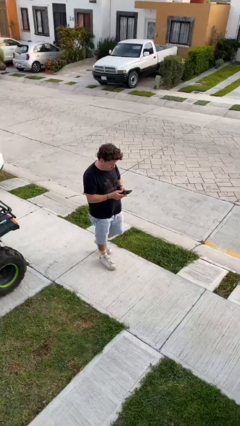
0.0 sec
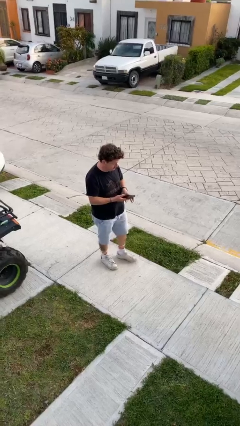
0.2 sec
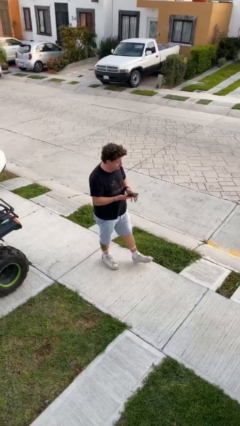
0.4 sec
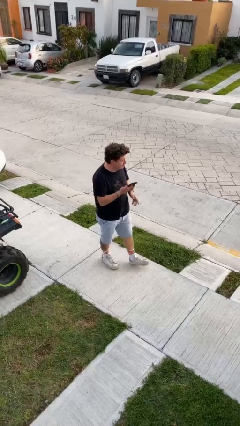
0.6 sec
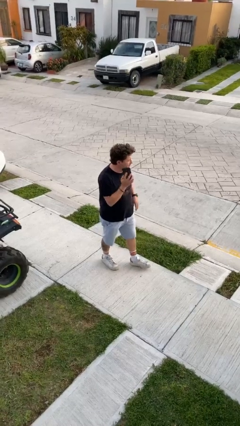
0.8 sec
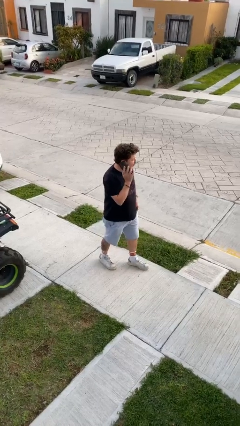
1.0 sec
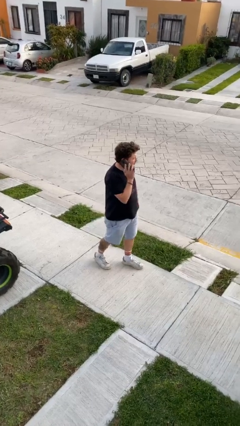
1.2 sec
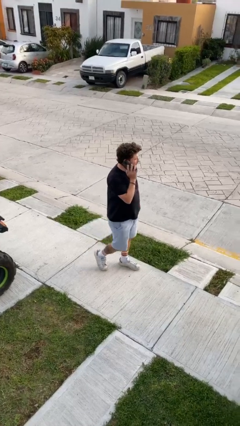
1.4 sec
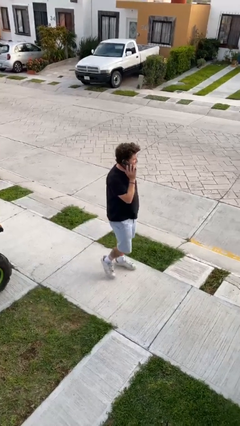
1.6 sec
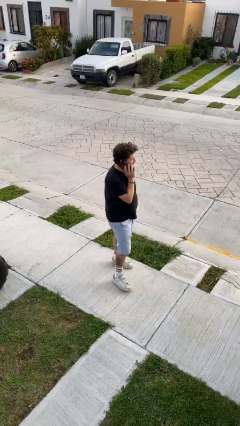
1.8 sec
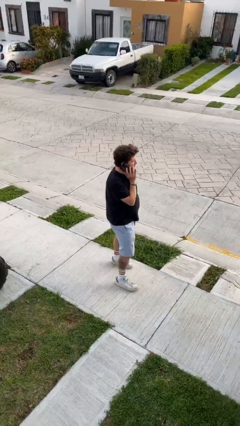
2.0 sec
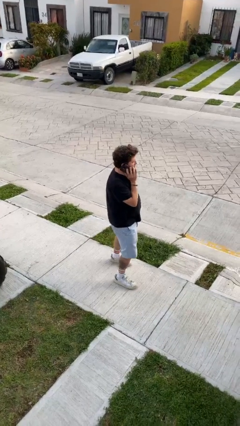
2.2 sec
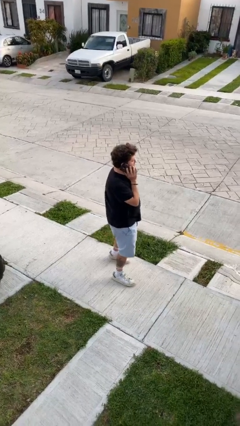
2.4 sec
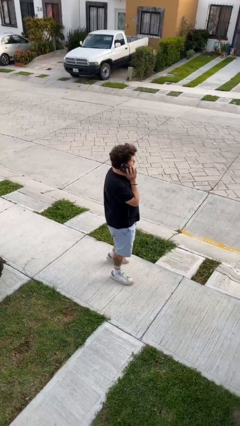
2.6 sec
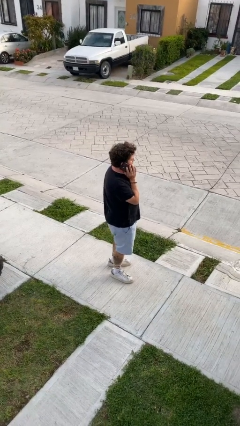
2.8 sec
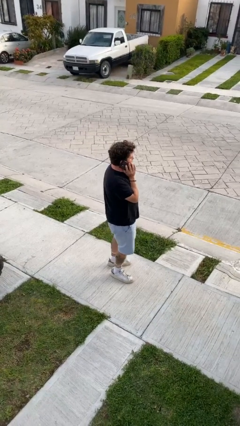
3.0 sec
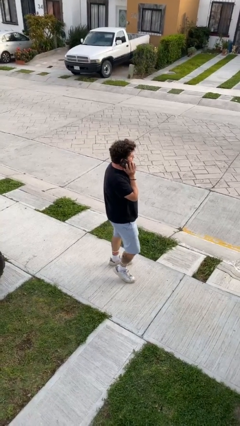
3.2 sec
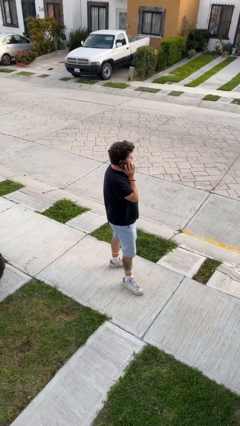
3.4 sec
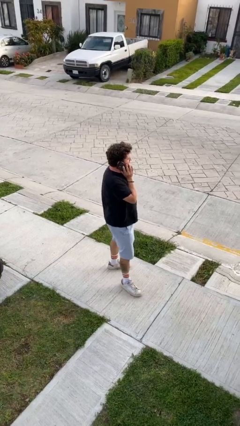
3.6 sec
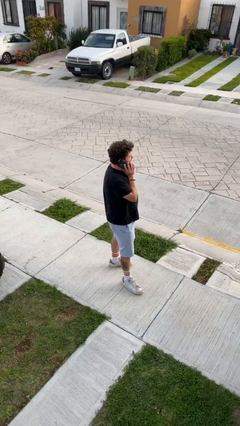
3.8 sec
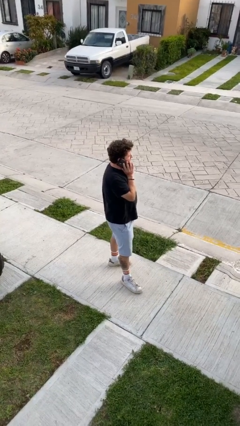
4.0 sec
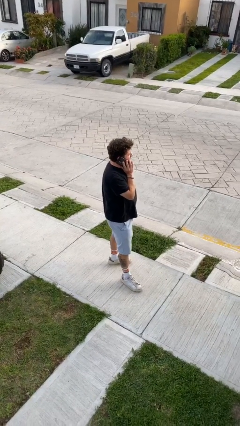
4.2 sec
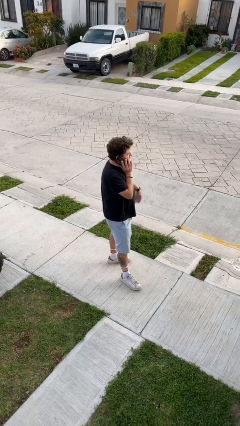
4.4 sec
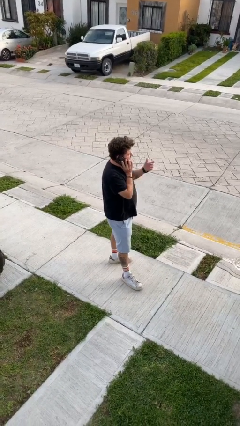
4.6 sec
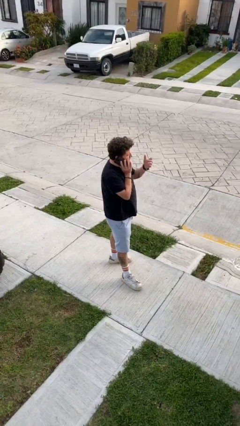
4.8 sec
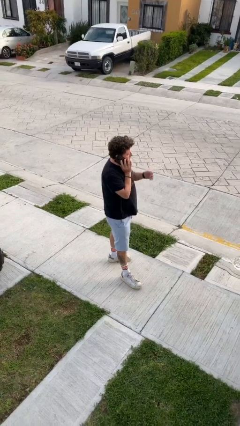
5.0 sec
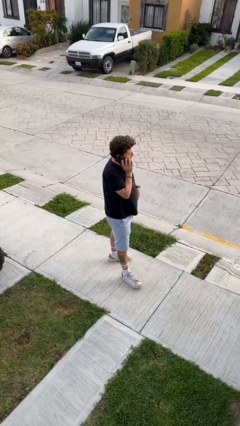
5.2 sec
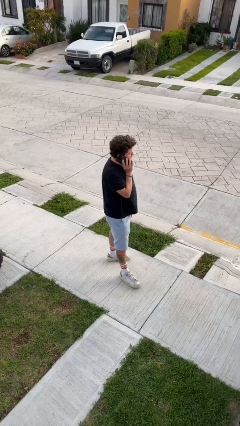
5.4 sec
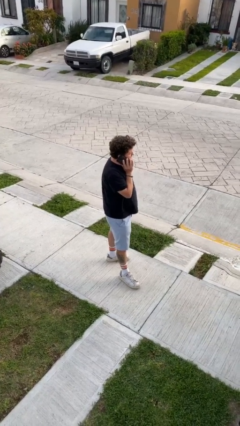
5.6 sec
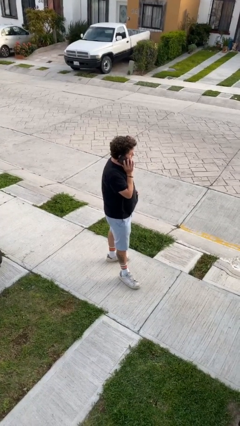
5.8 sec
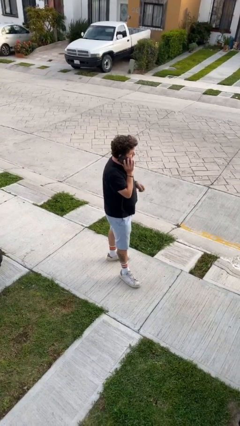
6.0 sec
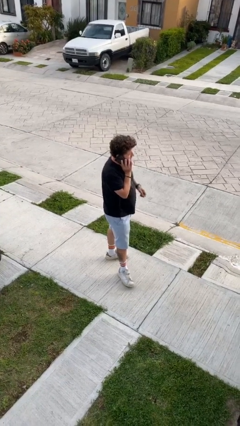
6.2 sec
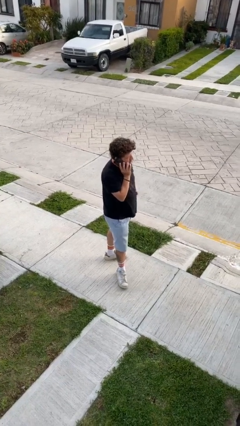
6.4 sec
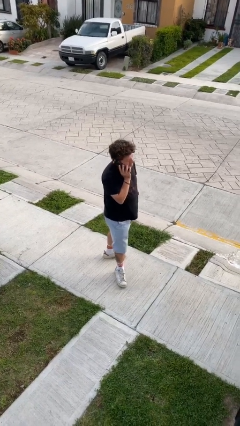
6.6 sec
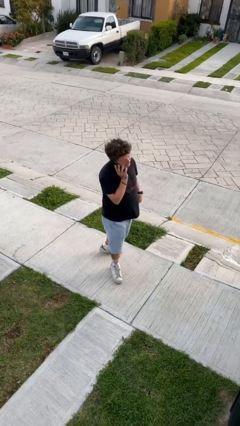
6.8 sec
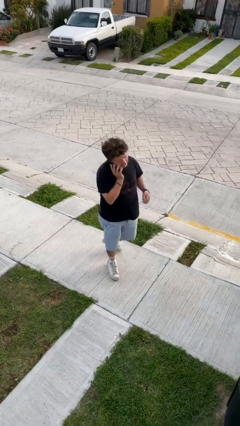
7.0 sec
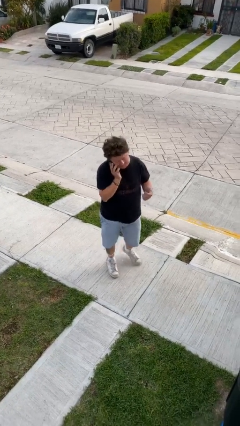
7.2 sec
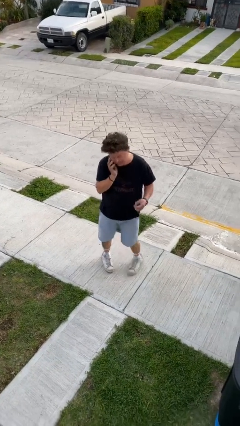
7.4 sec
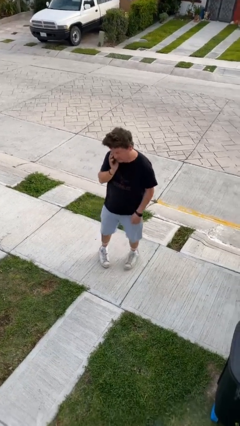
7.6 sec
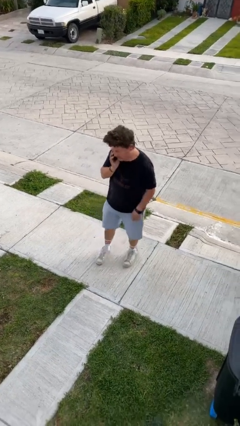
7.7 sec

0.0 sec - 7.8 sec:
person talks on phone

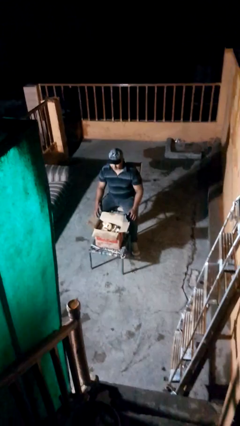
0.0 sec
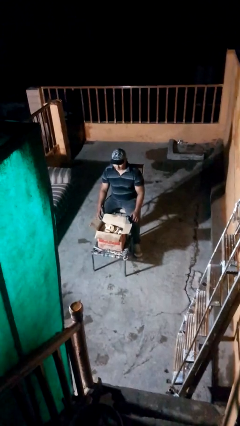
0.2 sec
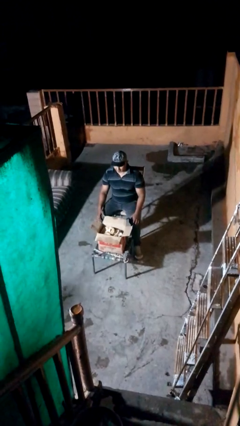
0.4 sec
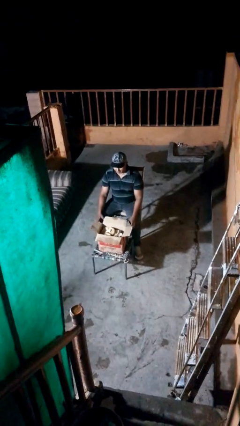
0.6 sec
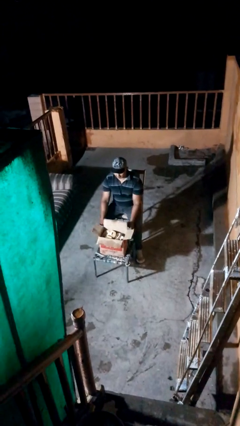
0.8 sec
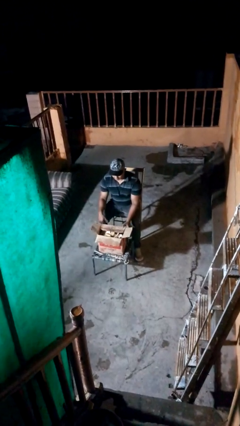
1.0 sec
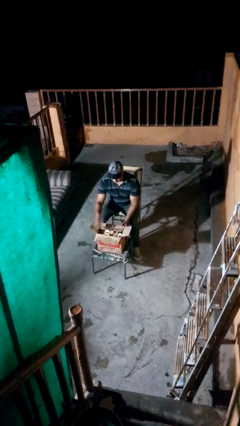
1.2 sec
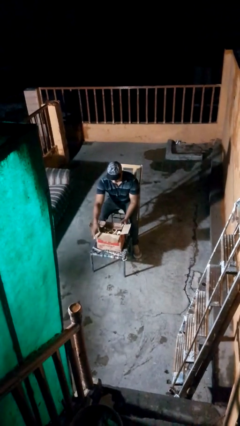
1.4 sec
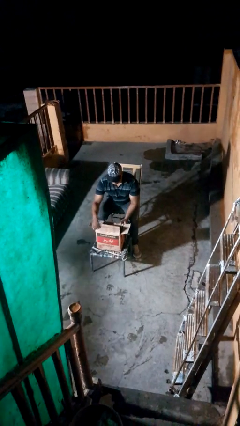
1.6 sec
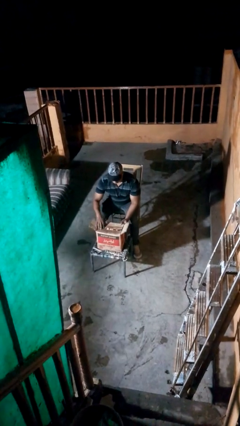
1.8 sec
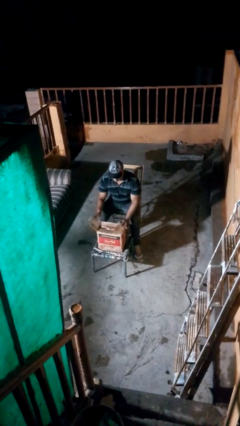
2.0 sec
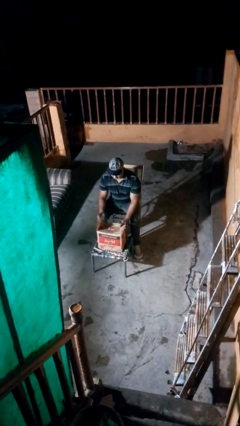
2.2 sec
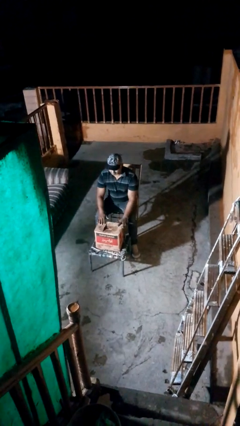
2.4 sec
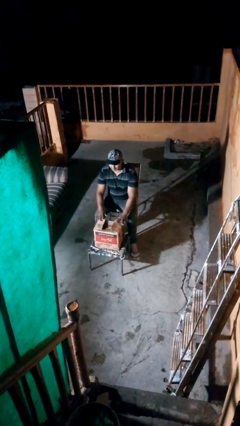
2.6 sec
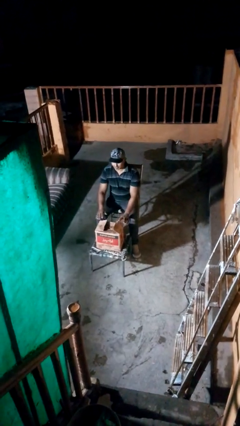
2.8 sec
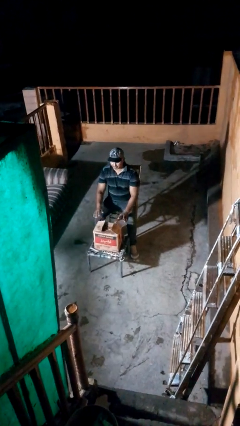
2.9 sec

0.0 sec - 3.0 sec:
person closes box

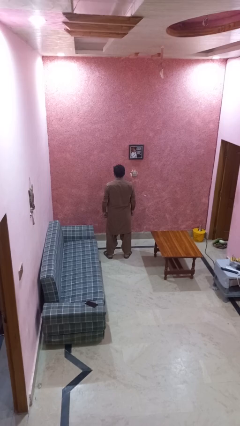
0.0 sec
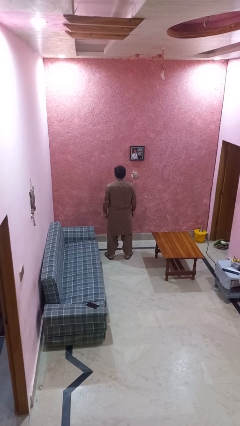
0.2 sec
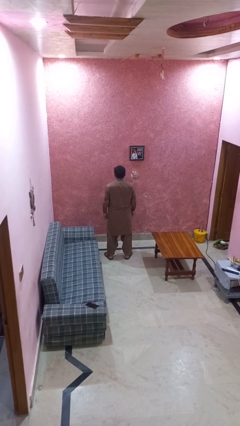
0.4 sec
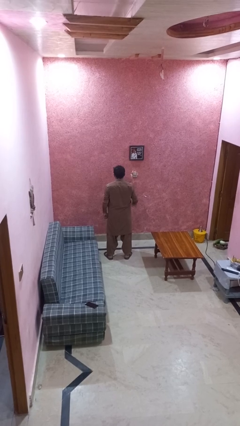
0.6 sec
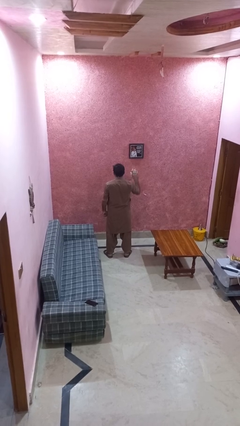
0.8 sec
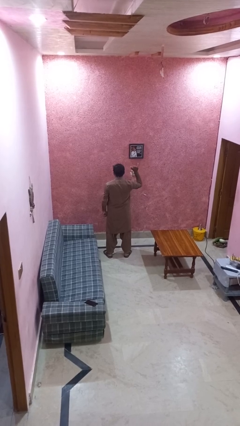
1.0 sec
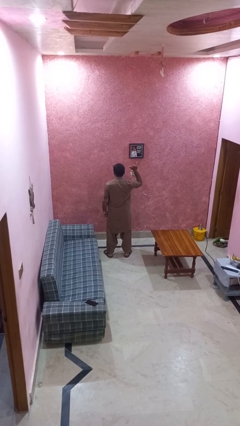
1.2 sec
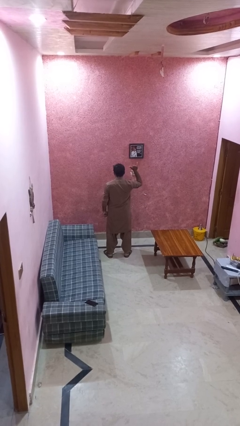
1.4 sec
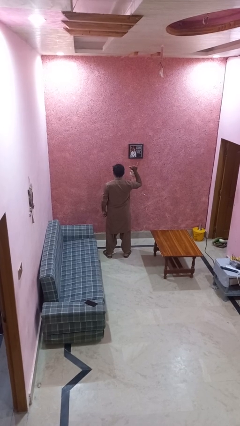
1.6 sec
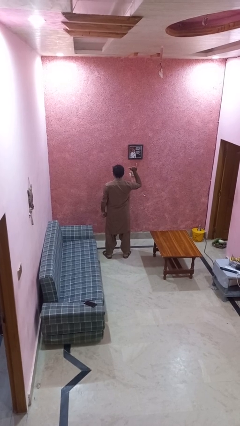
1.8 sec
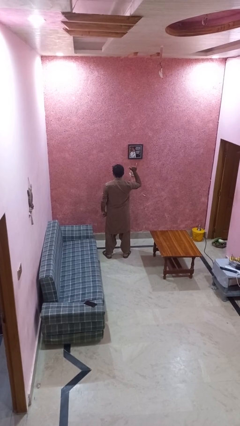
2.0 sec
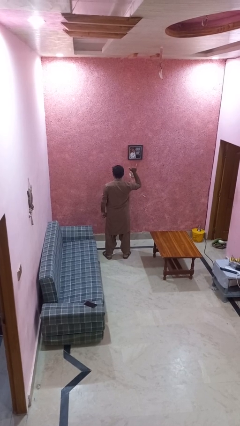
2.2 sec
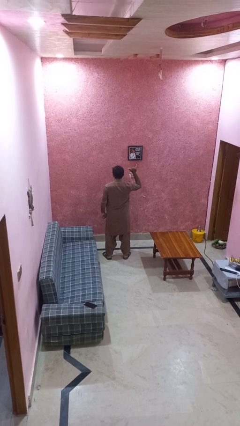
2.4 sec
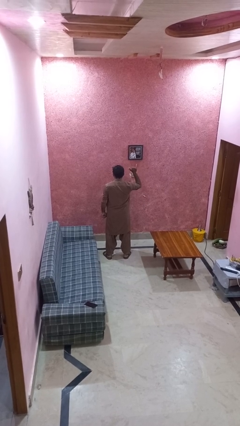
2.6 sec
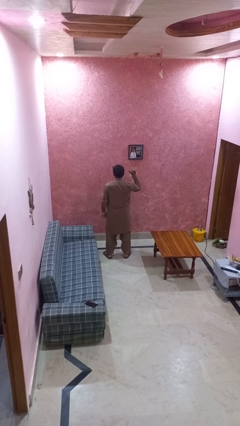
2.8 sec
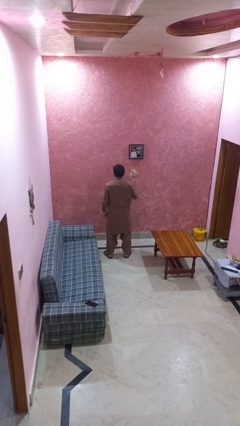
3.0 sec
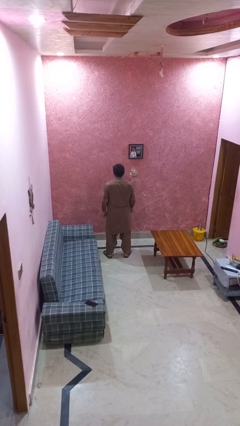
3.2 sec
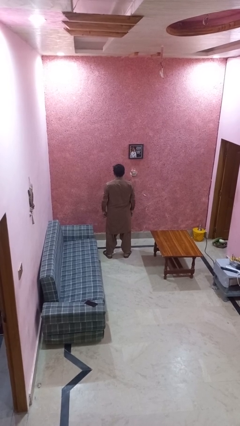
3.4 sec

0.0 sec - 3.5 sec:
person gestures hang loose

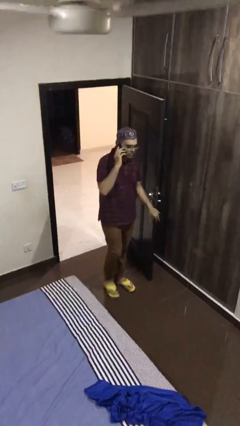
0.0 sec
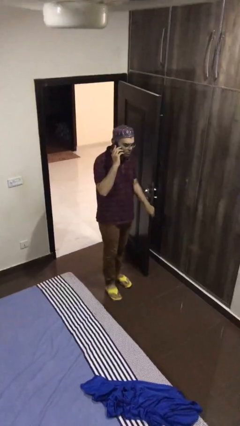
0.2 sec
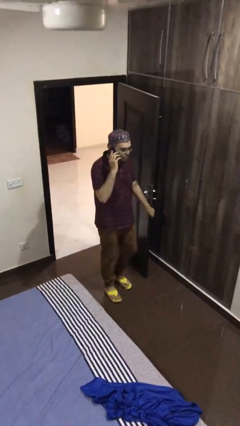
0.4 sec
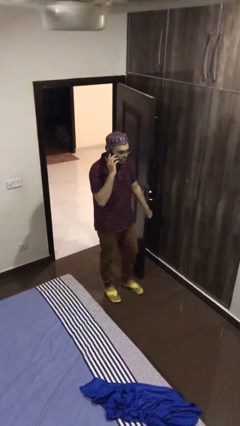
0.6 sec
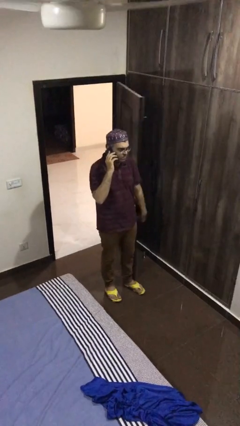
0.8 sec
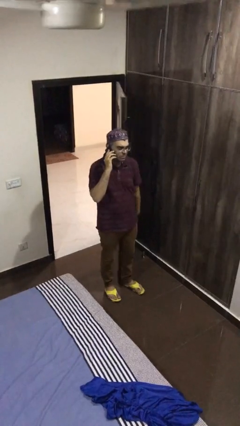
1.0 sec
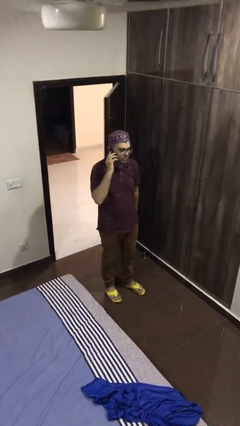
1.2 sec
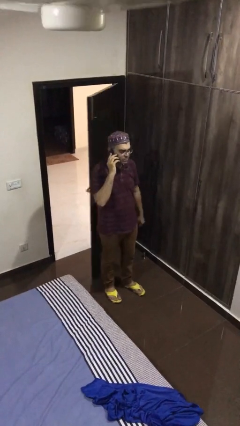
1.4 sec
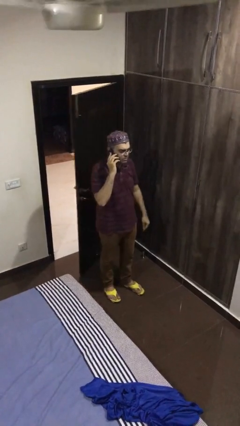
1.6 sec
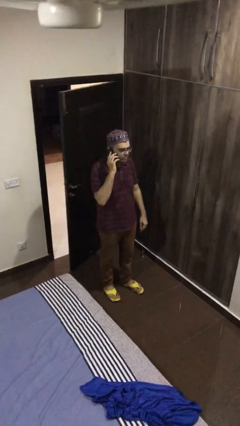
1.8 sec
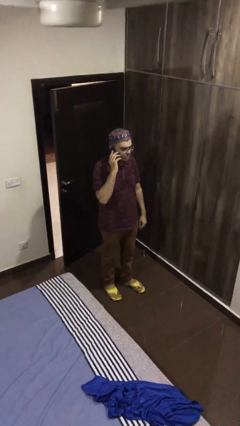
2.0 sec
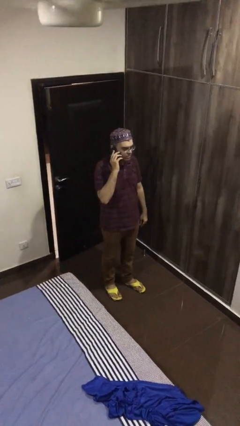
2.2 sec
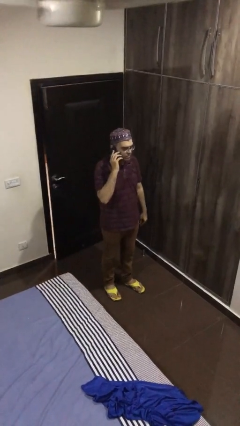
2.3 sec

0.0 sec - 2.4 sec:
person closes facility door

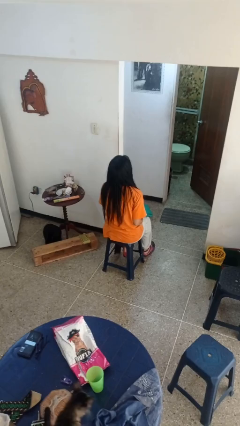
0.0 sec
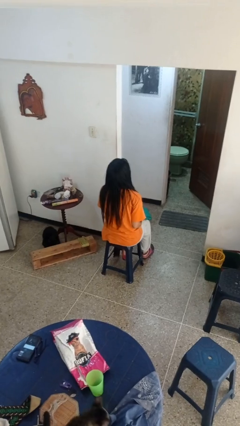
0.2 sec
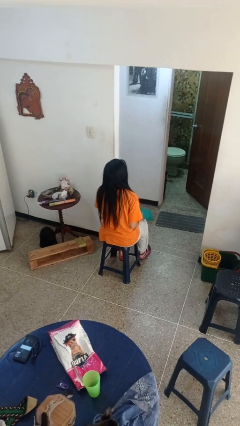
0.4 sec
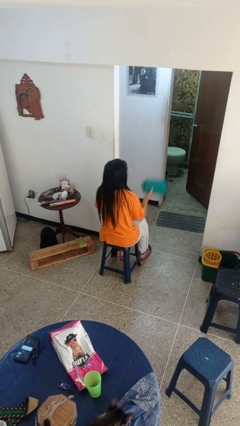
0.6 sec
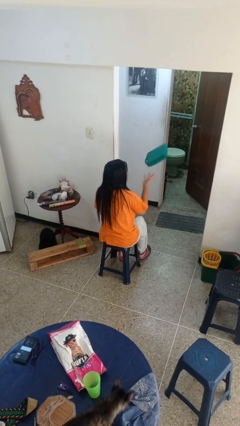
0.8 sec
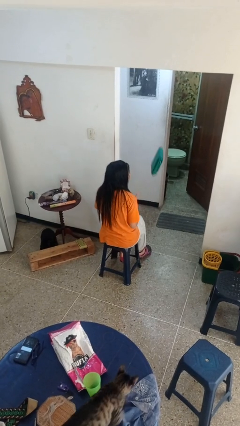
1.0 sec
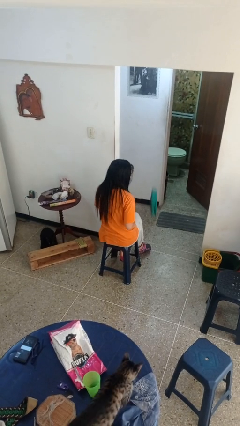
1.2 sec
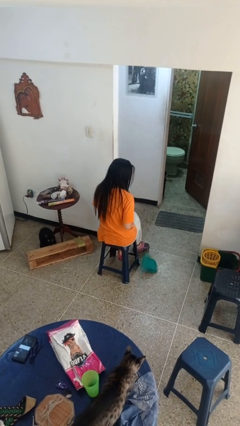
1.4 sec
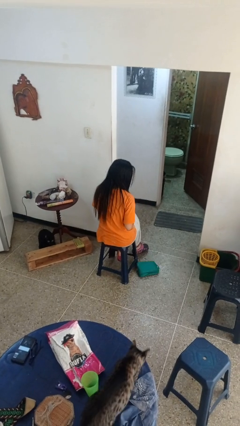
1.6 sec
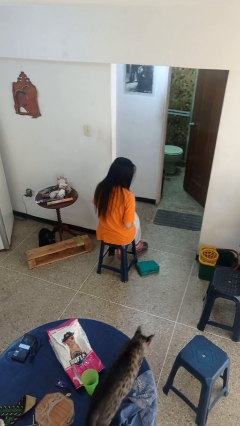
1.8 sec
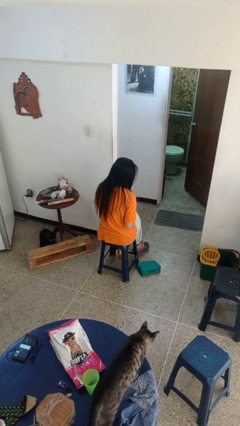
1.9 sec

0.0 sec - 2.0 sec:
person throws object into air
